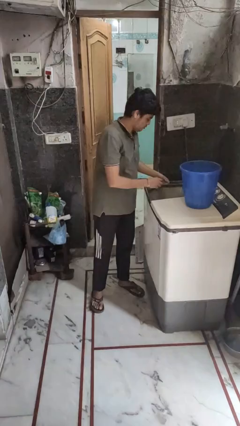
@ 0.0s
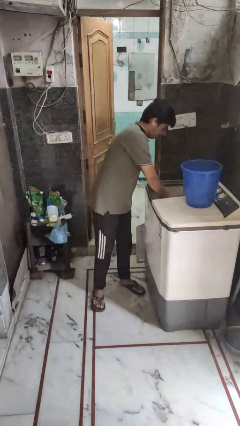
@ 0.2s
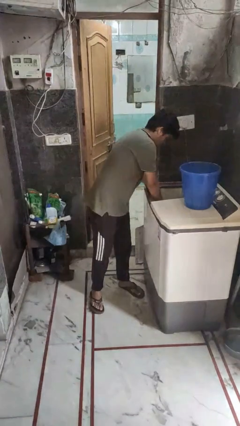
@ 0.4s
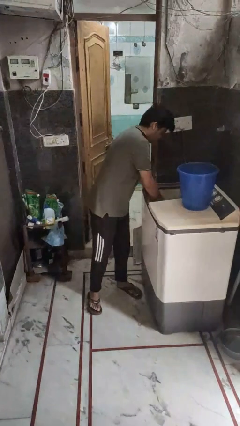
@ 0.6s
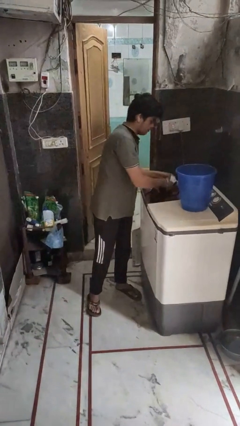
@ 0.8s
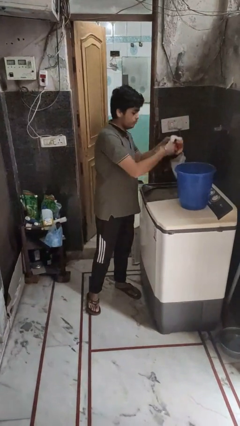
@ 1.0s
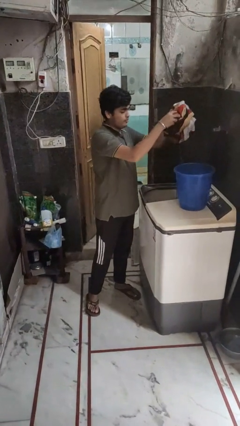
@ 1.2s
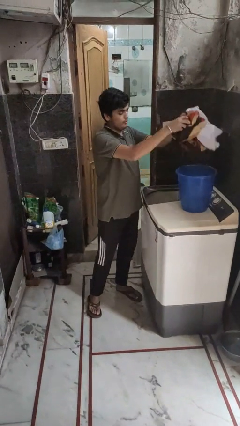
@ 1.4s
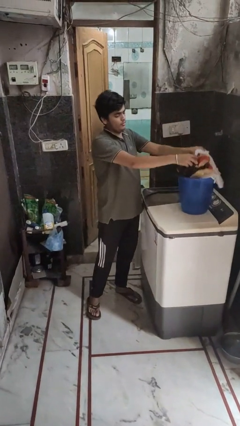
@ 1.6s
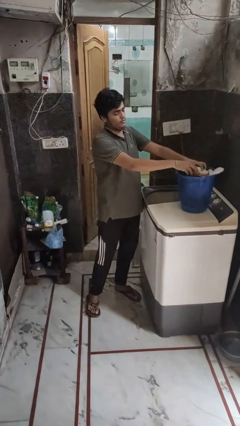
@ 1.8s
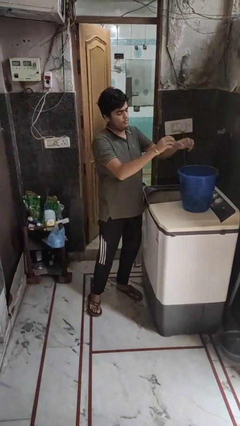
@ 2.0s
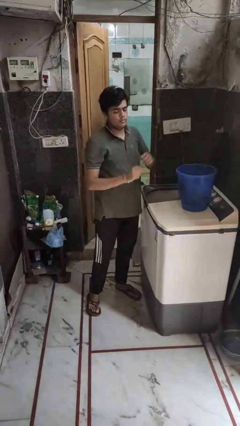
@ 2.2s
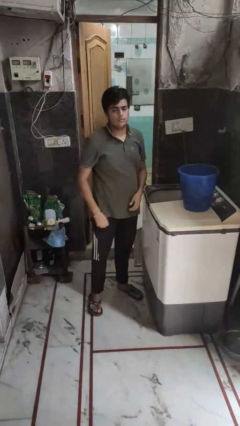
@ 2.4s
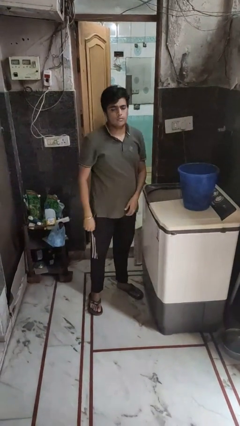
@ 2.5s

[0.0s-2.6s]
person unloads clotheswasher

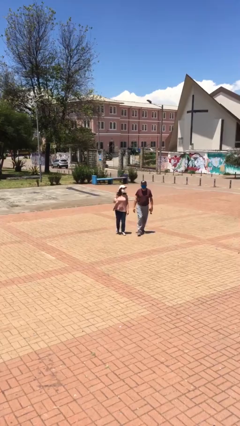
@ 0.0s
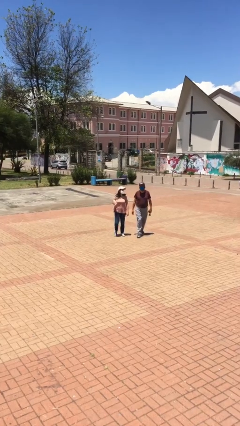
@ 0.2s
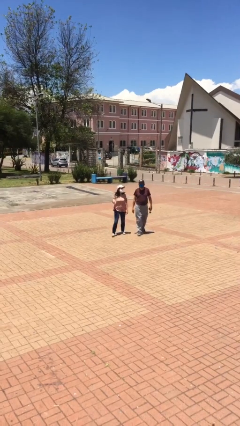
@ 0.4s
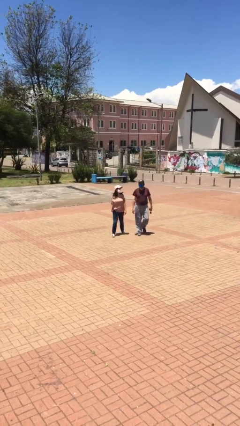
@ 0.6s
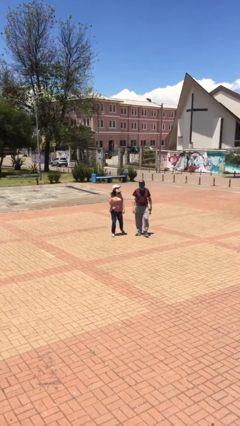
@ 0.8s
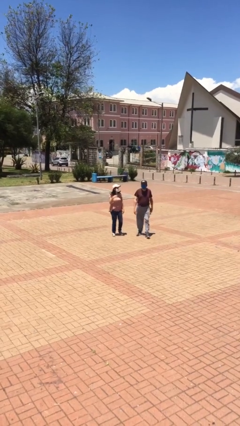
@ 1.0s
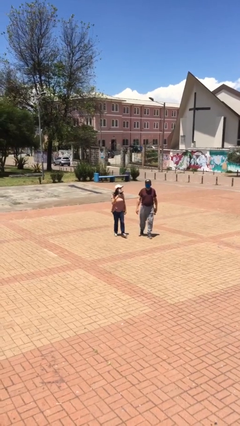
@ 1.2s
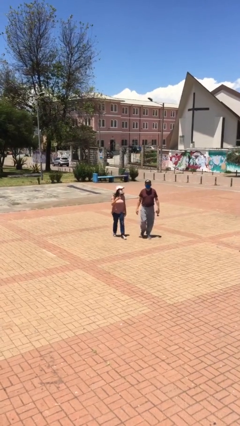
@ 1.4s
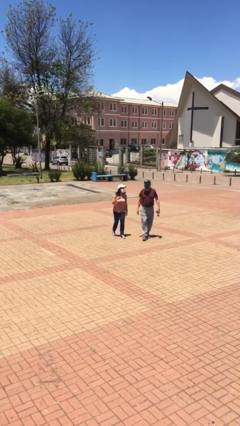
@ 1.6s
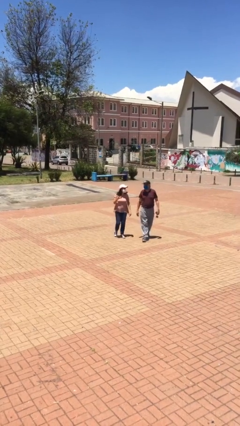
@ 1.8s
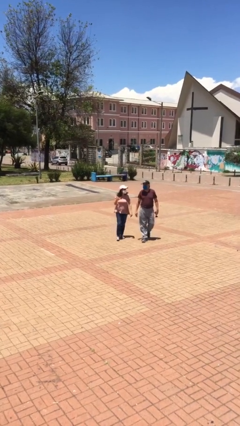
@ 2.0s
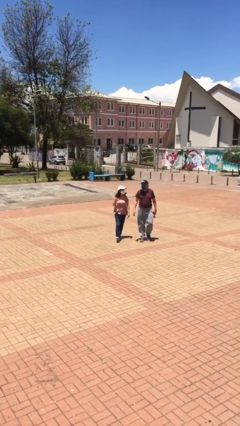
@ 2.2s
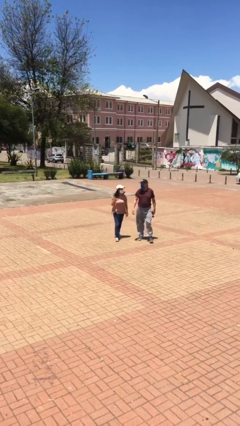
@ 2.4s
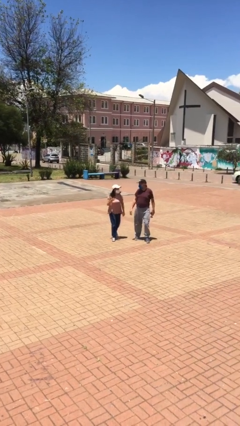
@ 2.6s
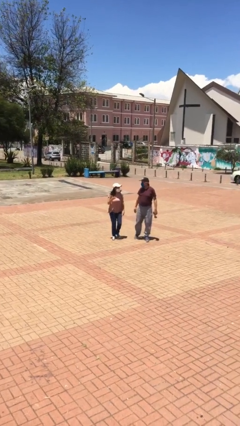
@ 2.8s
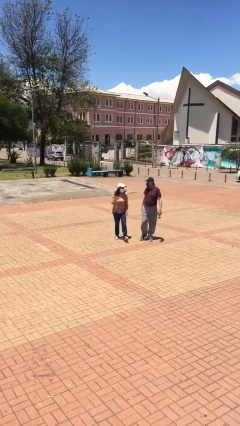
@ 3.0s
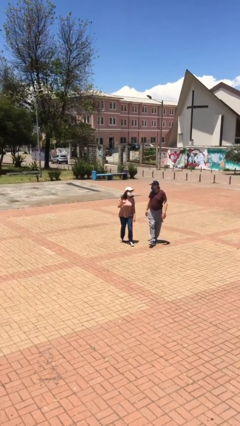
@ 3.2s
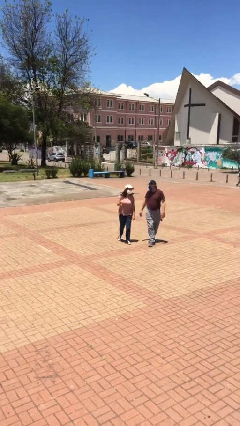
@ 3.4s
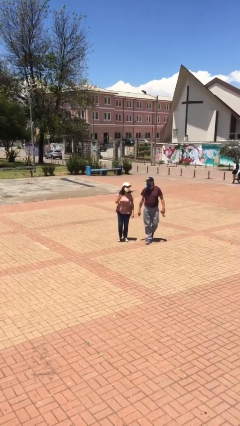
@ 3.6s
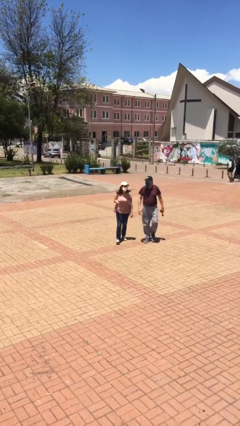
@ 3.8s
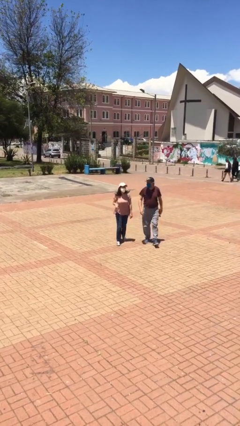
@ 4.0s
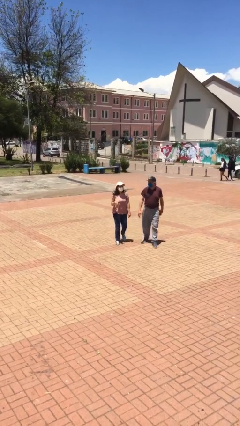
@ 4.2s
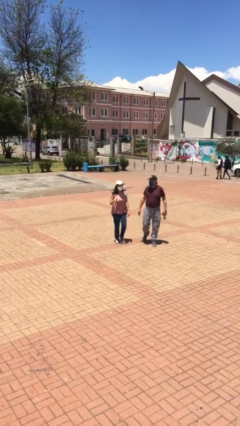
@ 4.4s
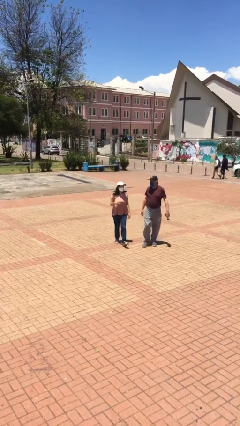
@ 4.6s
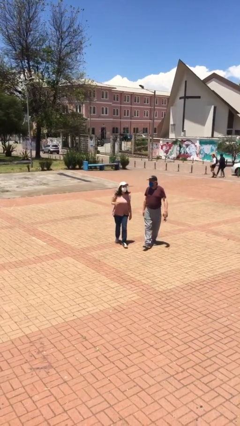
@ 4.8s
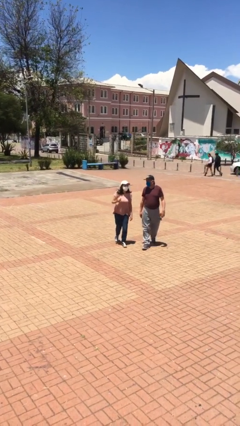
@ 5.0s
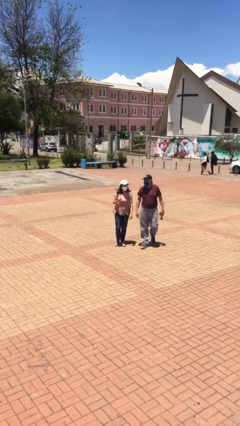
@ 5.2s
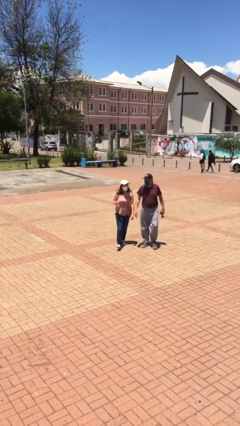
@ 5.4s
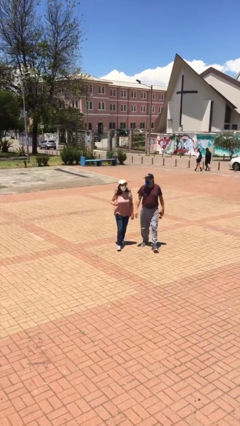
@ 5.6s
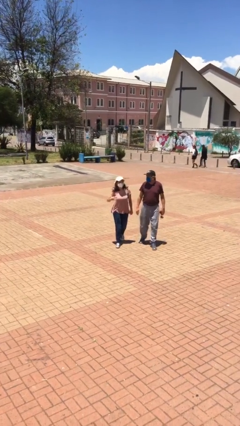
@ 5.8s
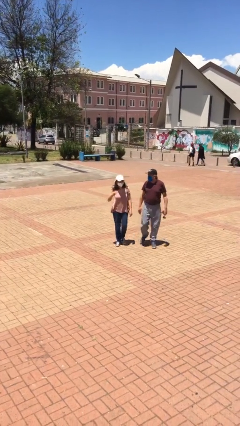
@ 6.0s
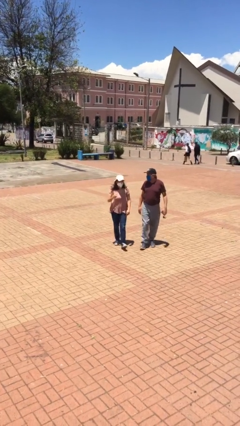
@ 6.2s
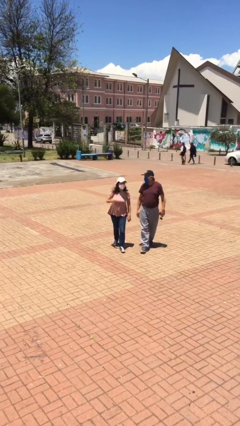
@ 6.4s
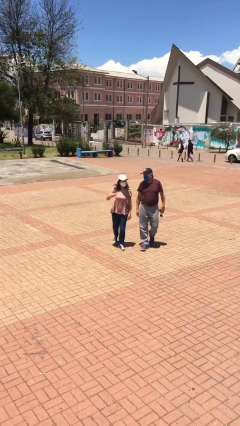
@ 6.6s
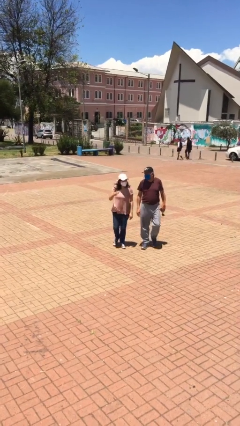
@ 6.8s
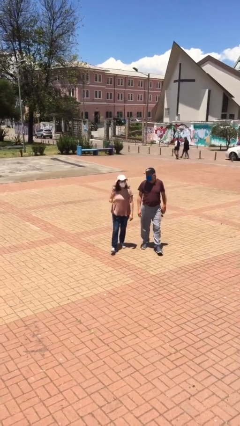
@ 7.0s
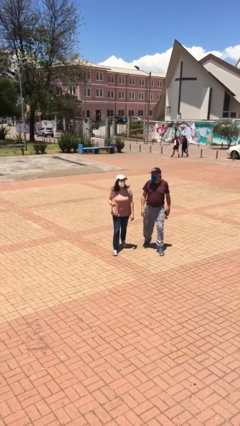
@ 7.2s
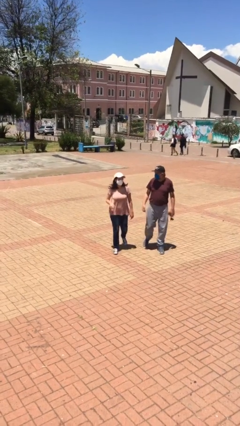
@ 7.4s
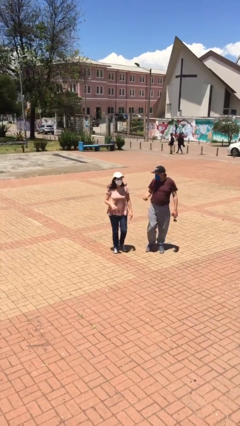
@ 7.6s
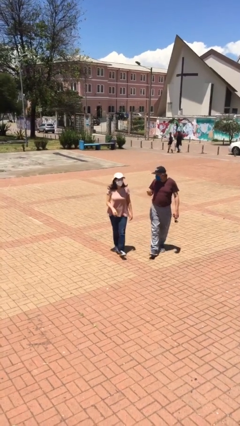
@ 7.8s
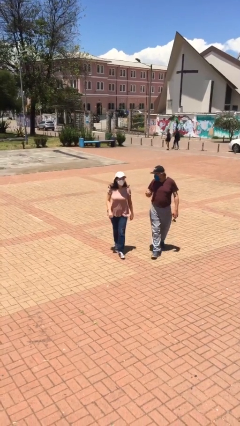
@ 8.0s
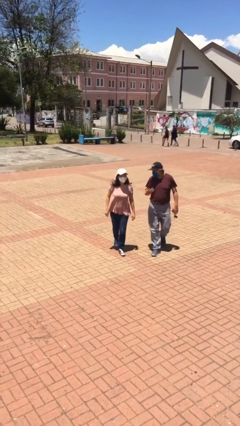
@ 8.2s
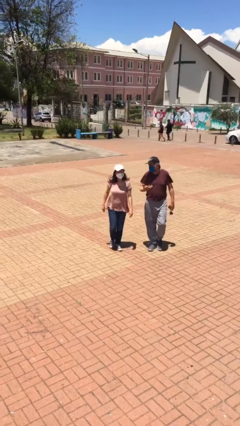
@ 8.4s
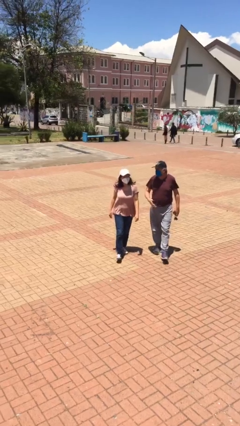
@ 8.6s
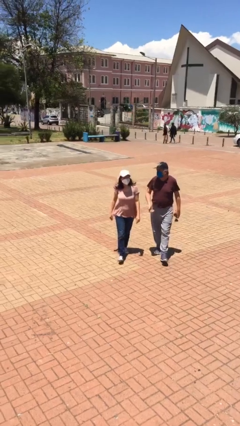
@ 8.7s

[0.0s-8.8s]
person talks to person

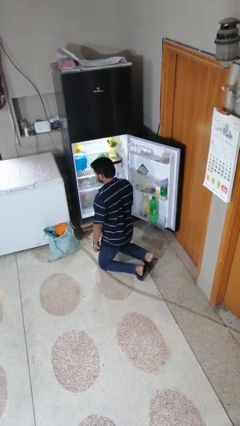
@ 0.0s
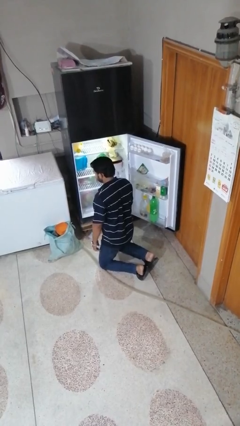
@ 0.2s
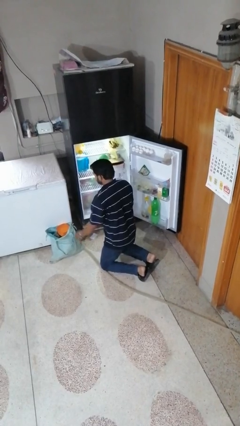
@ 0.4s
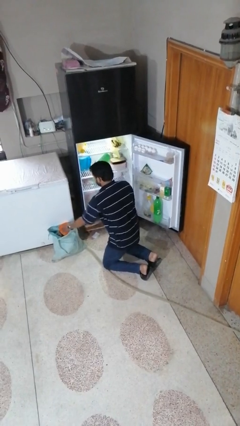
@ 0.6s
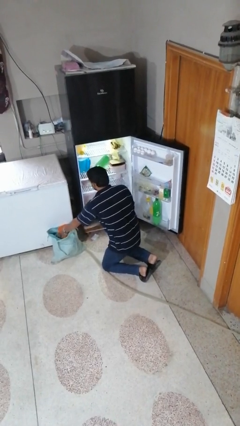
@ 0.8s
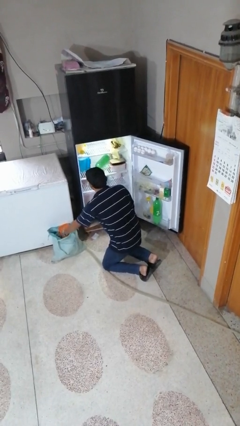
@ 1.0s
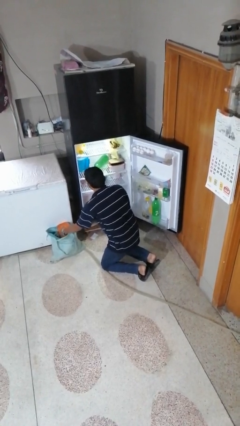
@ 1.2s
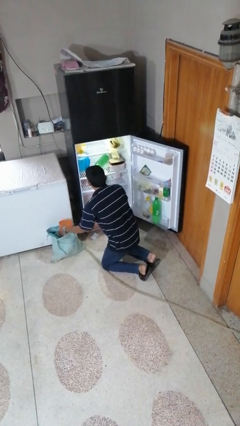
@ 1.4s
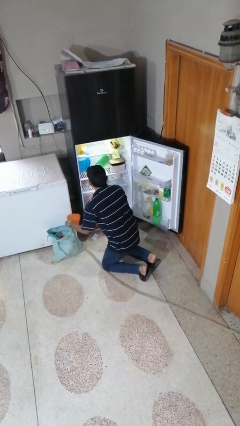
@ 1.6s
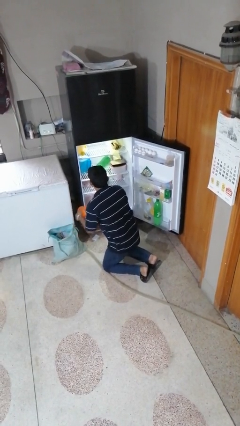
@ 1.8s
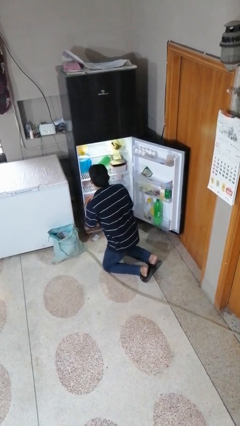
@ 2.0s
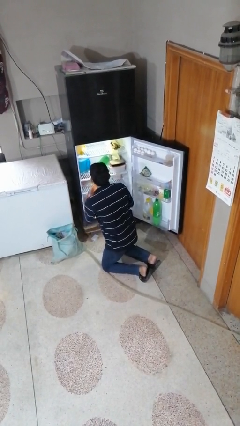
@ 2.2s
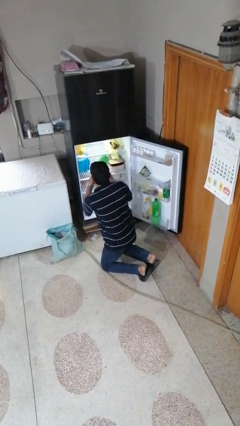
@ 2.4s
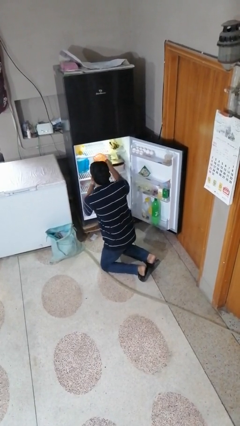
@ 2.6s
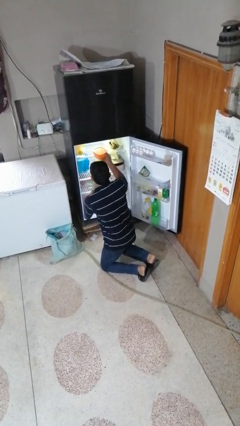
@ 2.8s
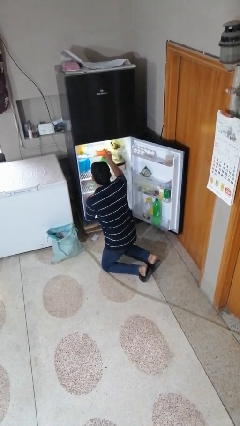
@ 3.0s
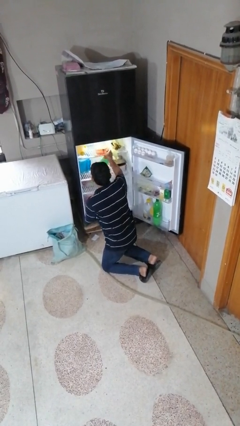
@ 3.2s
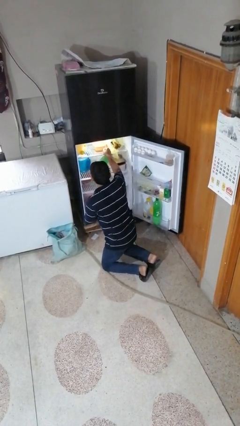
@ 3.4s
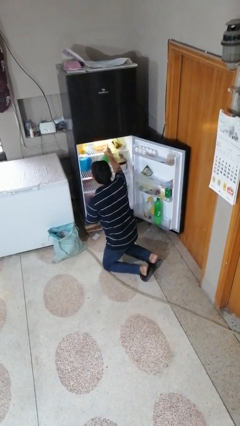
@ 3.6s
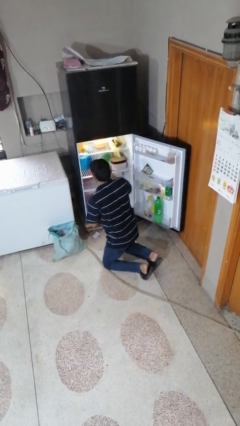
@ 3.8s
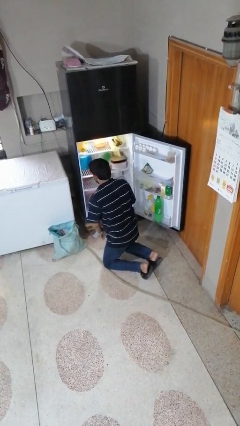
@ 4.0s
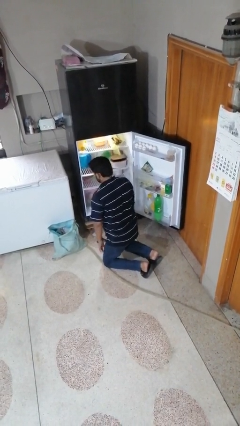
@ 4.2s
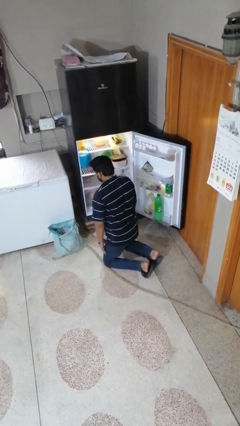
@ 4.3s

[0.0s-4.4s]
person loads groceries into refrigerator

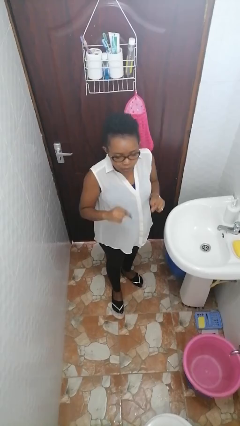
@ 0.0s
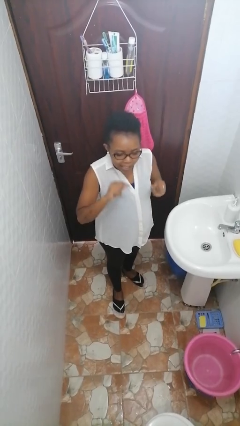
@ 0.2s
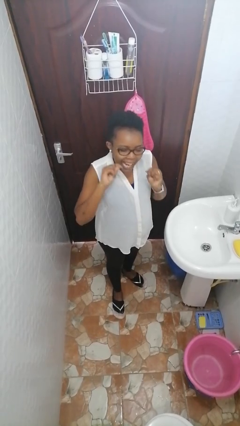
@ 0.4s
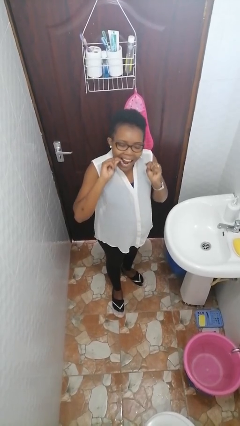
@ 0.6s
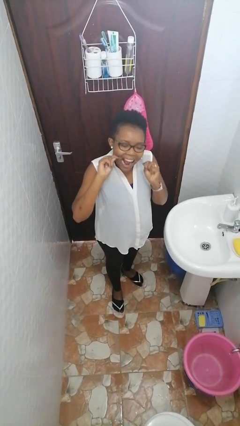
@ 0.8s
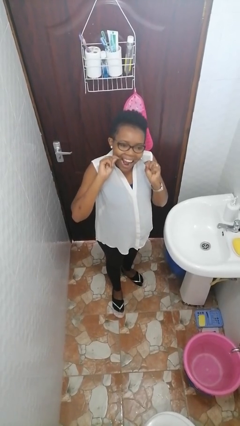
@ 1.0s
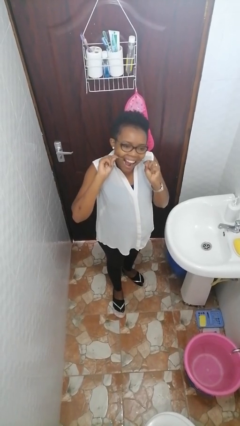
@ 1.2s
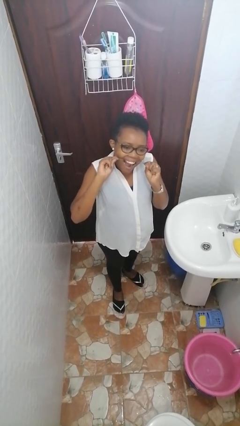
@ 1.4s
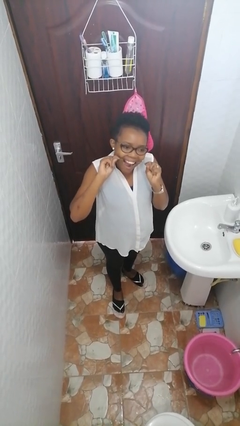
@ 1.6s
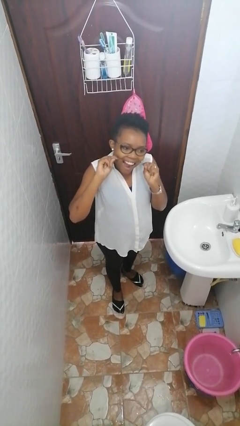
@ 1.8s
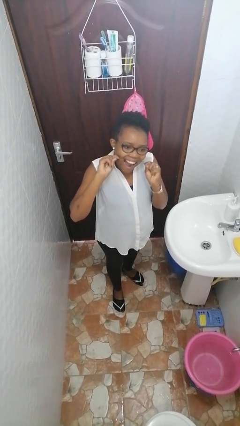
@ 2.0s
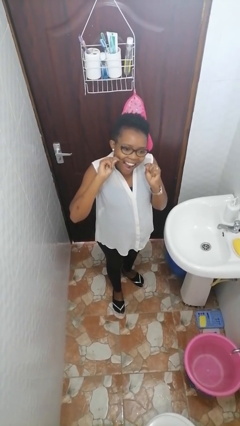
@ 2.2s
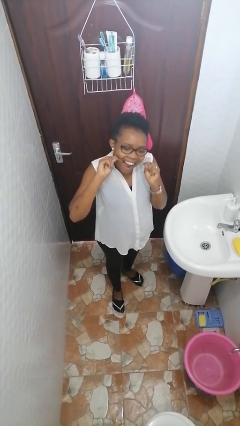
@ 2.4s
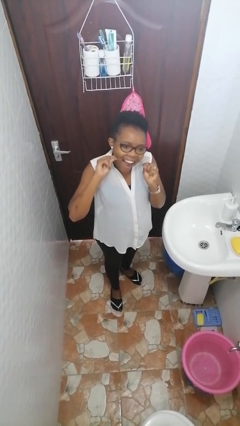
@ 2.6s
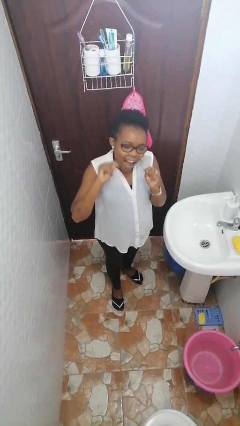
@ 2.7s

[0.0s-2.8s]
person flosses
